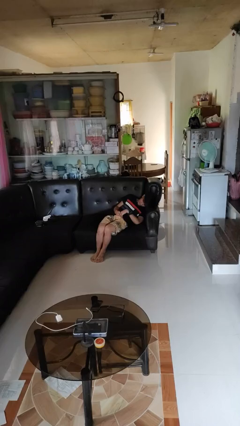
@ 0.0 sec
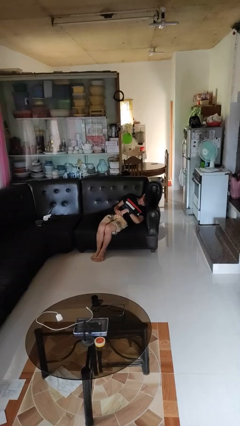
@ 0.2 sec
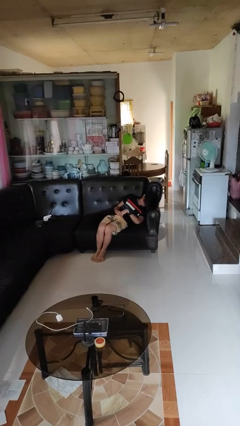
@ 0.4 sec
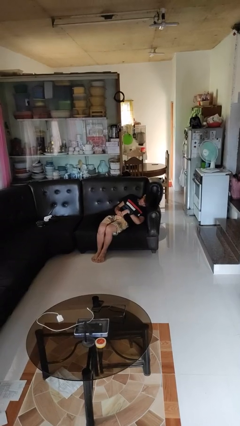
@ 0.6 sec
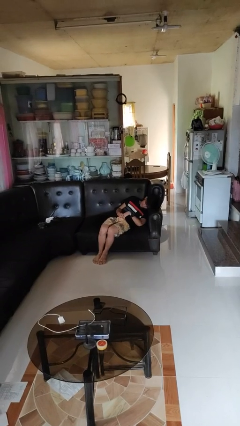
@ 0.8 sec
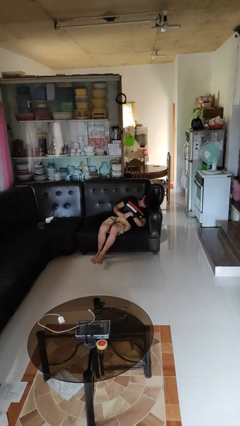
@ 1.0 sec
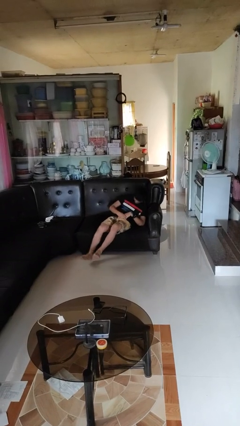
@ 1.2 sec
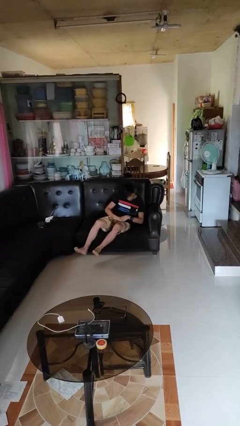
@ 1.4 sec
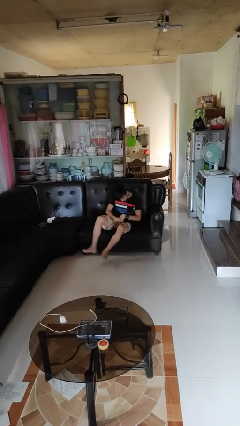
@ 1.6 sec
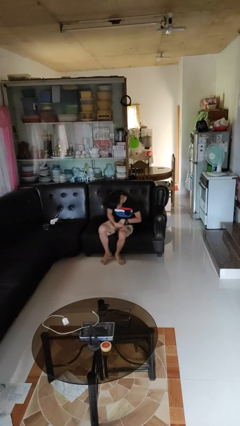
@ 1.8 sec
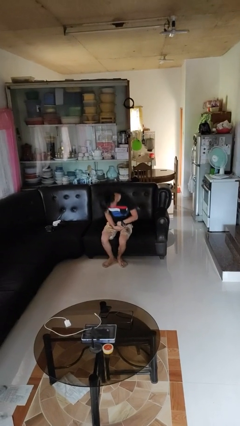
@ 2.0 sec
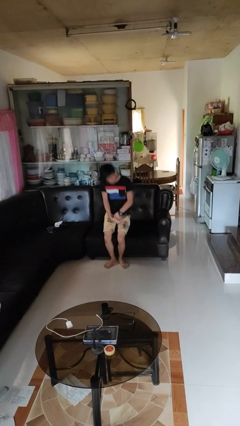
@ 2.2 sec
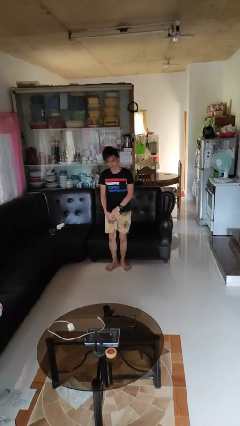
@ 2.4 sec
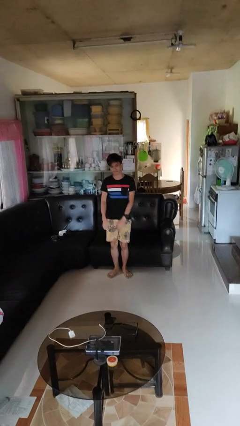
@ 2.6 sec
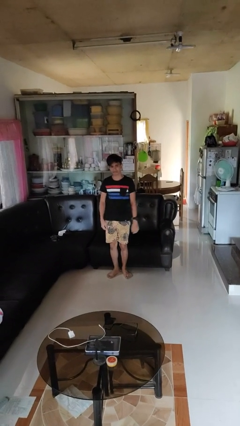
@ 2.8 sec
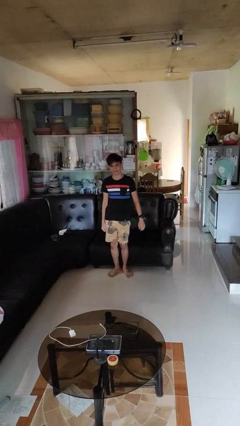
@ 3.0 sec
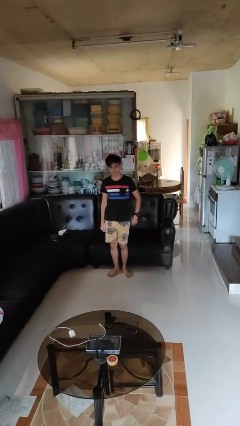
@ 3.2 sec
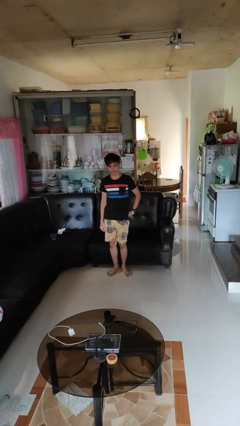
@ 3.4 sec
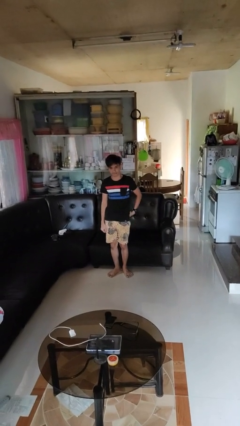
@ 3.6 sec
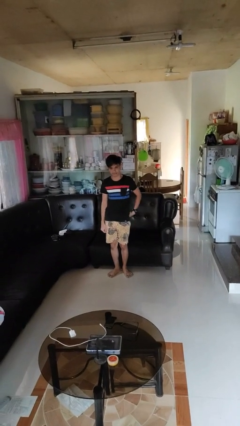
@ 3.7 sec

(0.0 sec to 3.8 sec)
person stands up

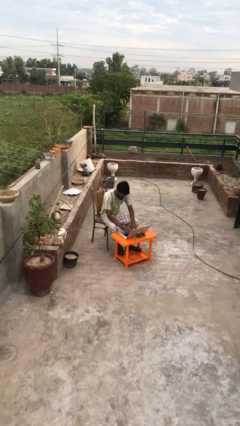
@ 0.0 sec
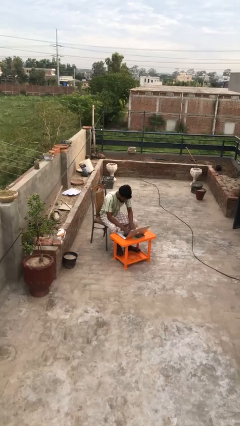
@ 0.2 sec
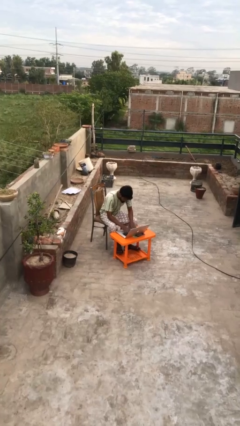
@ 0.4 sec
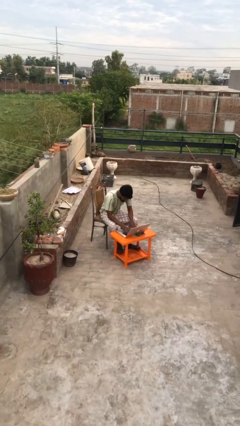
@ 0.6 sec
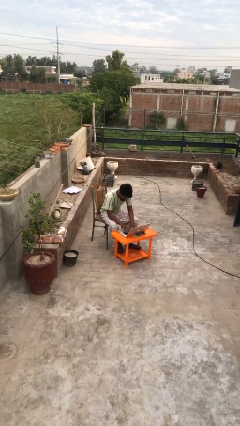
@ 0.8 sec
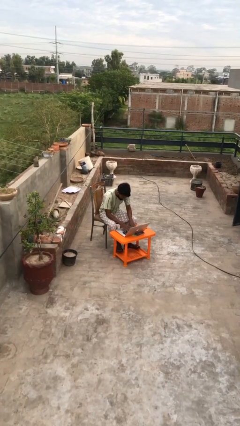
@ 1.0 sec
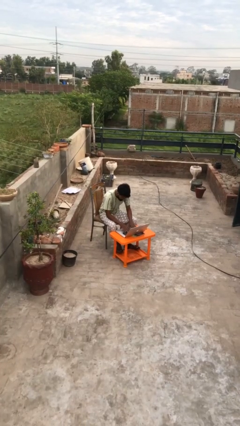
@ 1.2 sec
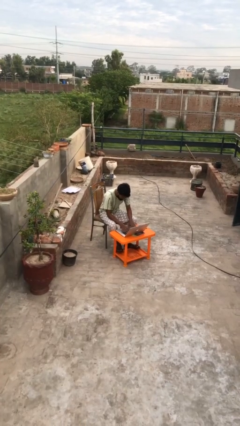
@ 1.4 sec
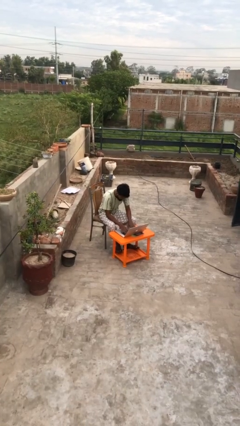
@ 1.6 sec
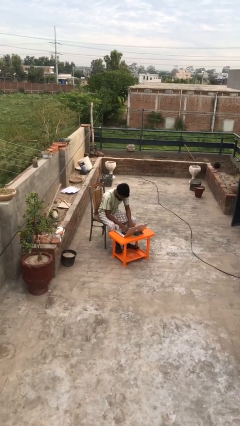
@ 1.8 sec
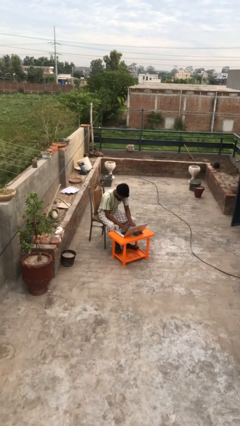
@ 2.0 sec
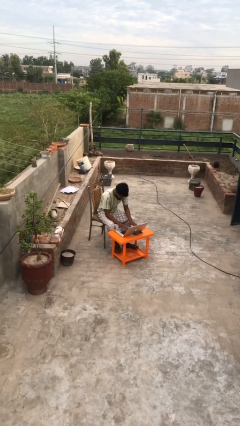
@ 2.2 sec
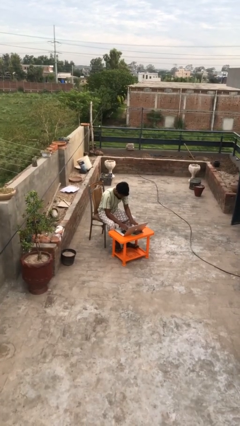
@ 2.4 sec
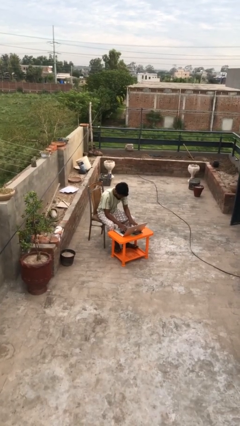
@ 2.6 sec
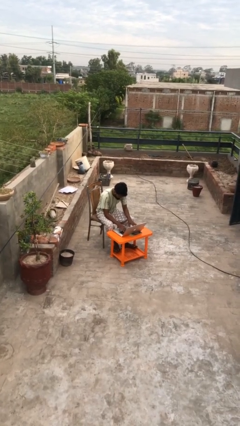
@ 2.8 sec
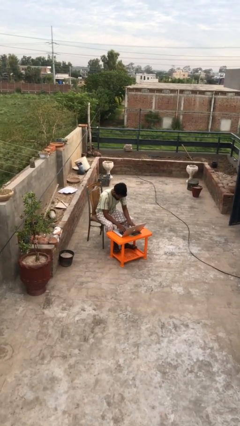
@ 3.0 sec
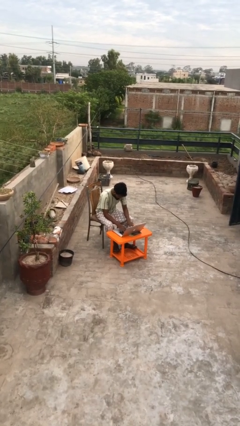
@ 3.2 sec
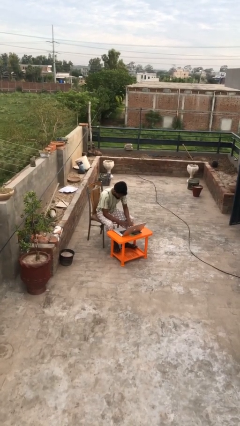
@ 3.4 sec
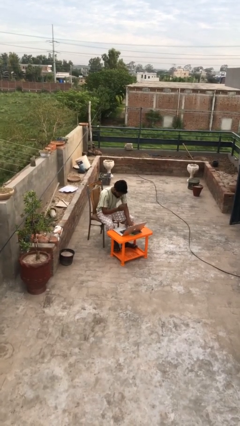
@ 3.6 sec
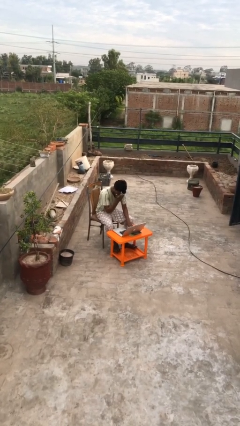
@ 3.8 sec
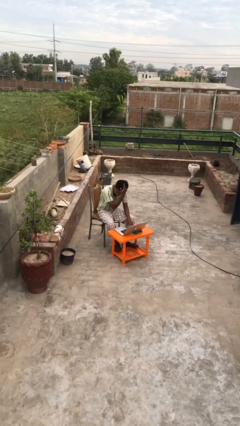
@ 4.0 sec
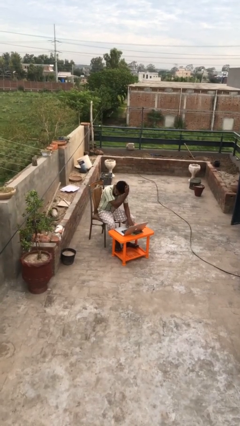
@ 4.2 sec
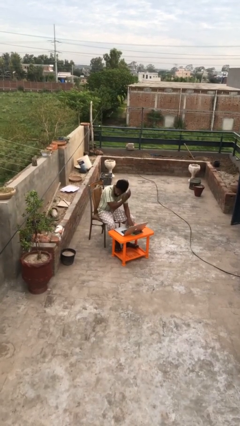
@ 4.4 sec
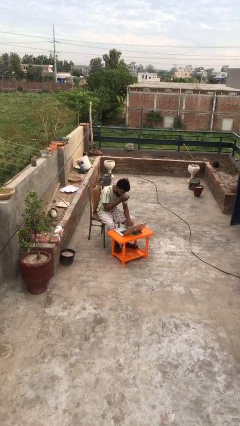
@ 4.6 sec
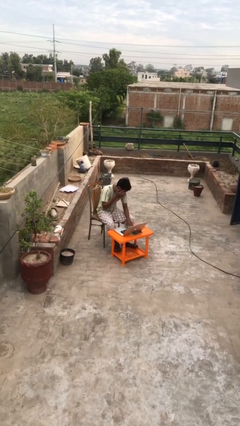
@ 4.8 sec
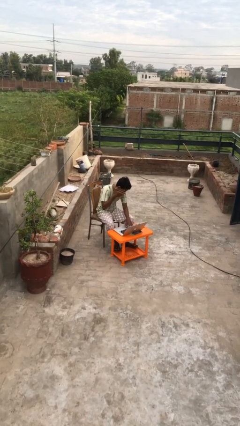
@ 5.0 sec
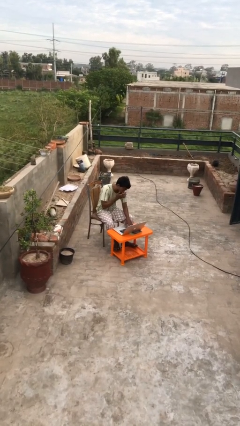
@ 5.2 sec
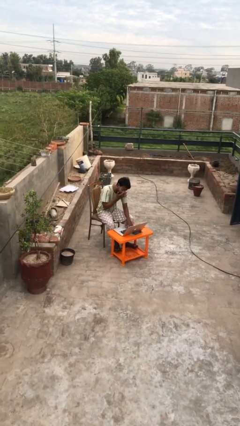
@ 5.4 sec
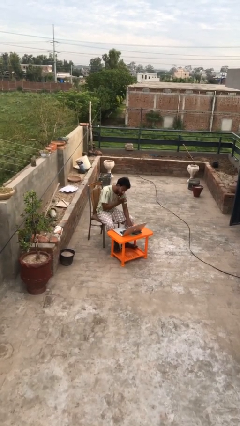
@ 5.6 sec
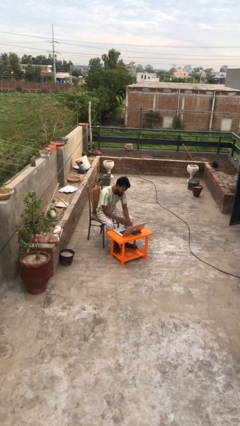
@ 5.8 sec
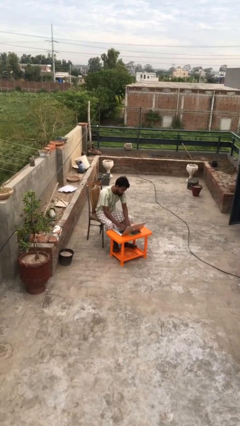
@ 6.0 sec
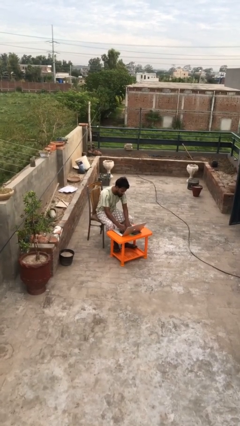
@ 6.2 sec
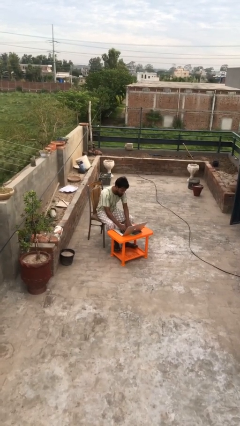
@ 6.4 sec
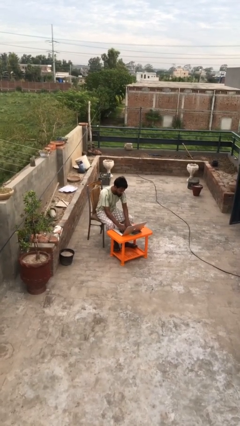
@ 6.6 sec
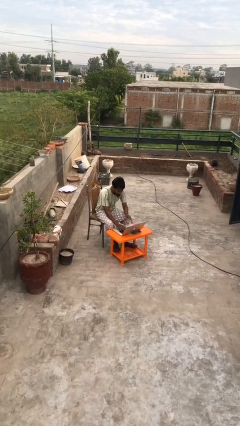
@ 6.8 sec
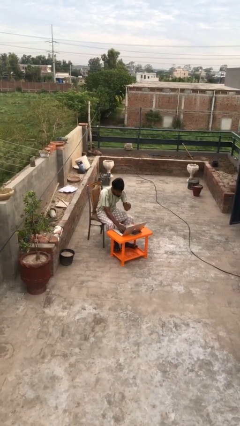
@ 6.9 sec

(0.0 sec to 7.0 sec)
person interacts with laptop

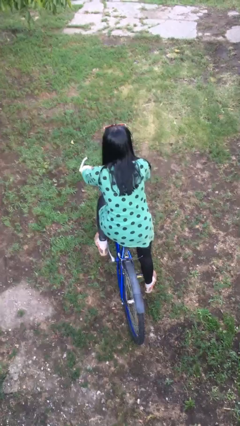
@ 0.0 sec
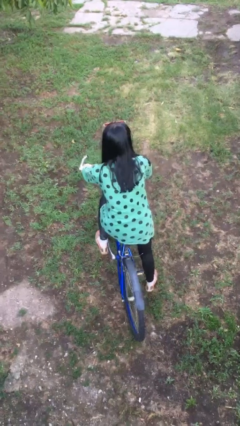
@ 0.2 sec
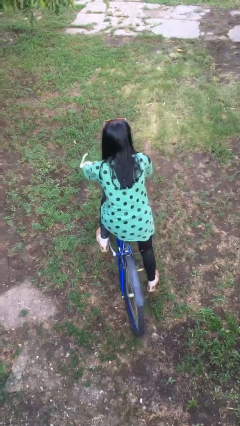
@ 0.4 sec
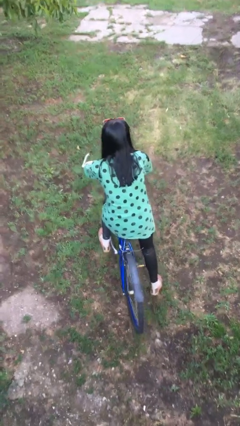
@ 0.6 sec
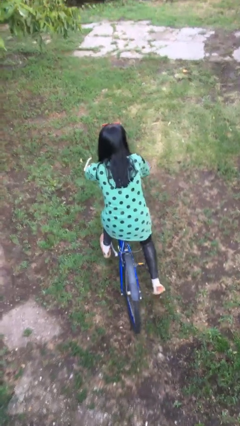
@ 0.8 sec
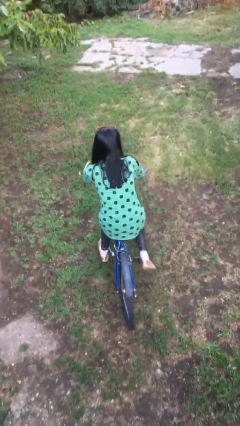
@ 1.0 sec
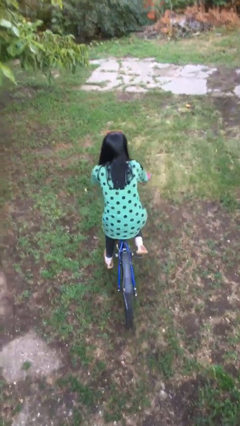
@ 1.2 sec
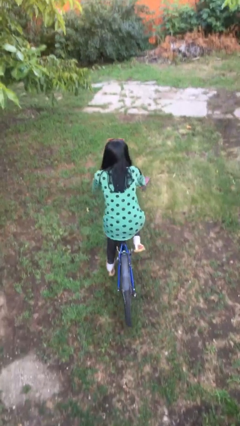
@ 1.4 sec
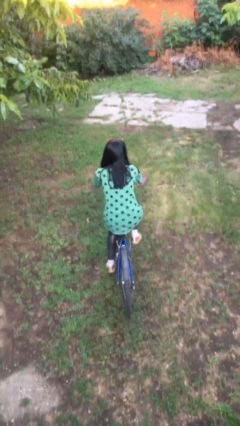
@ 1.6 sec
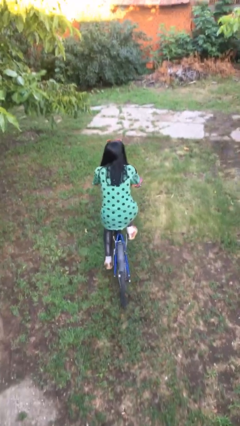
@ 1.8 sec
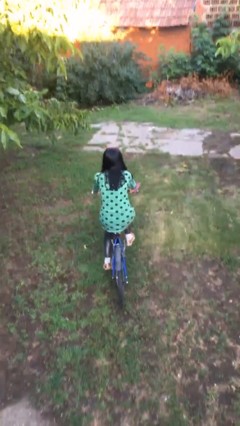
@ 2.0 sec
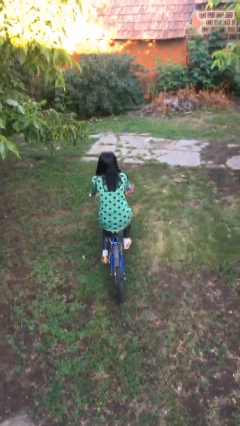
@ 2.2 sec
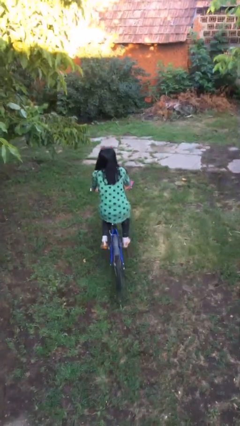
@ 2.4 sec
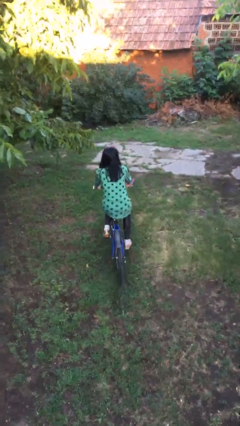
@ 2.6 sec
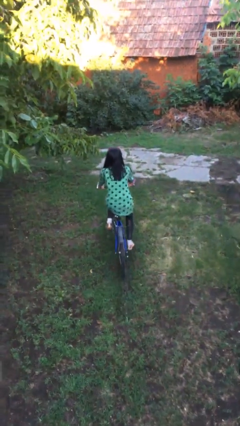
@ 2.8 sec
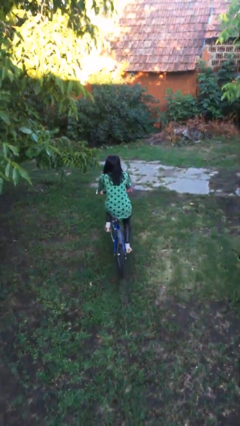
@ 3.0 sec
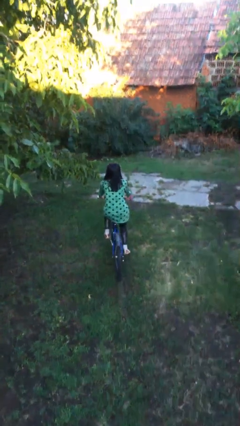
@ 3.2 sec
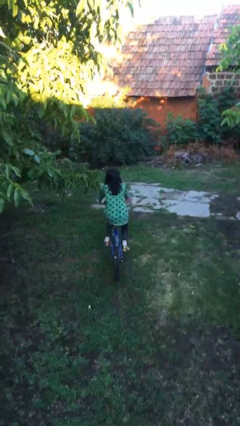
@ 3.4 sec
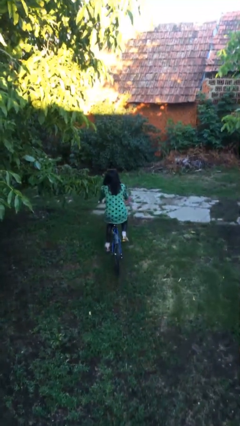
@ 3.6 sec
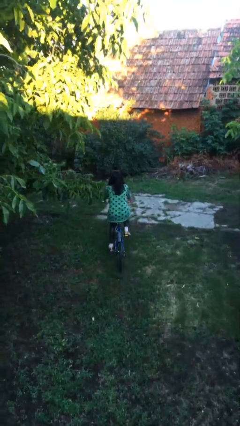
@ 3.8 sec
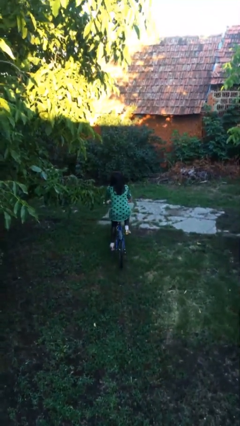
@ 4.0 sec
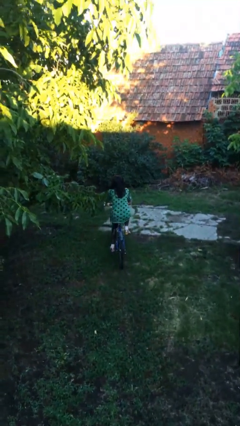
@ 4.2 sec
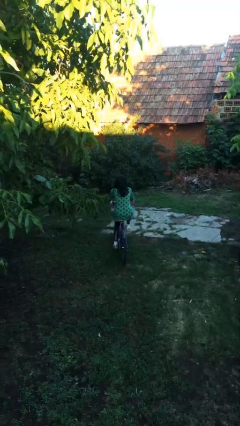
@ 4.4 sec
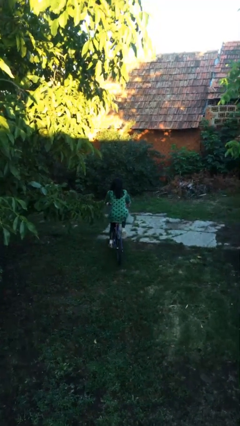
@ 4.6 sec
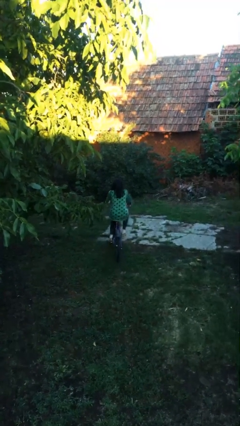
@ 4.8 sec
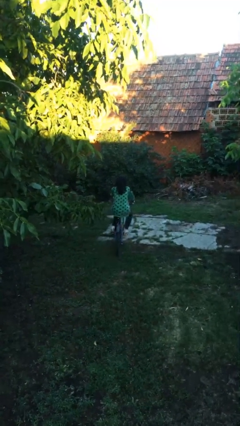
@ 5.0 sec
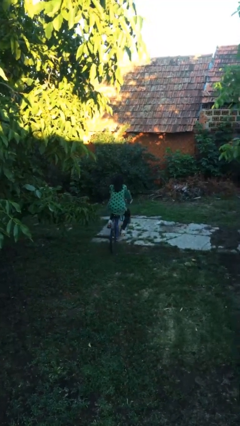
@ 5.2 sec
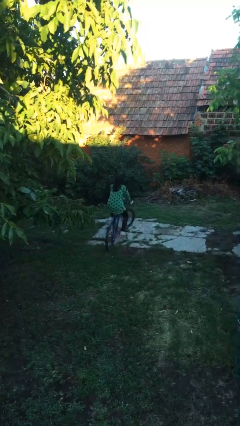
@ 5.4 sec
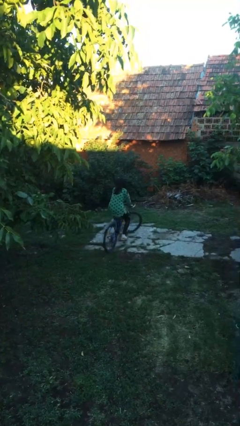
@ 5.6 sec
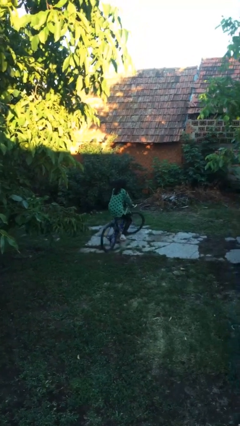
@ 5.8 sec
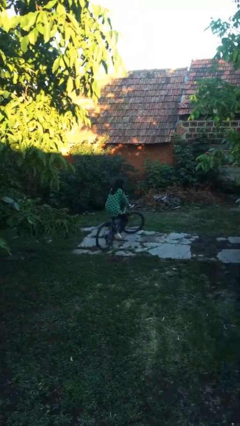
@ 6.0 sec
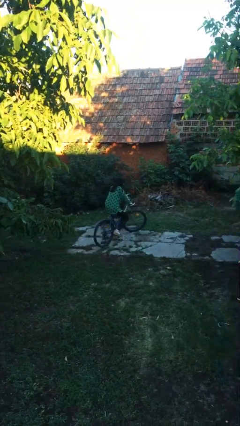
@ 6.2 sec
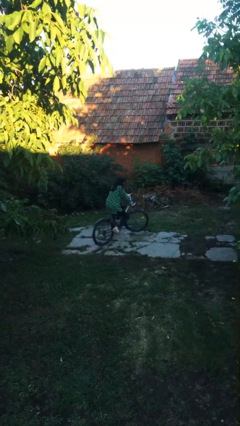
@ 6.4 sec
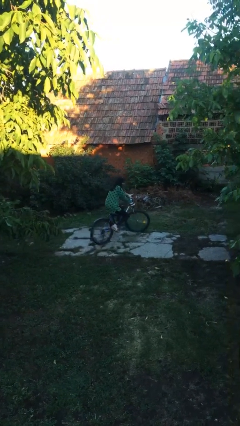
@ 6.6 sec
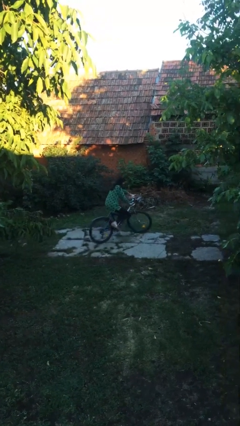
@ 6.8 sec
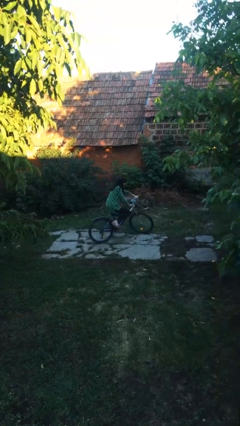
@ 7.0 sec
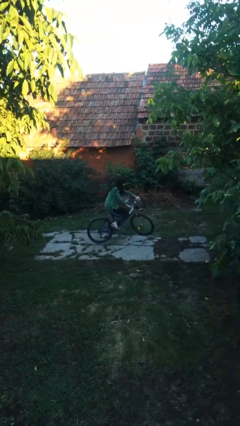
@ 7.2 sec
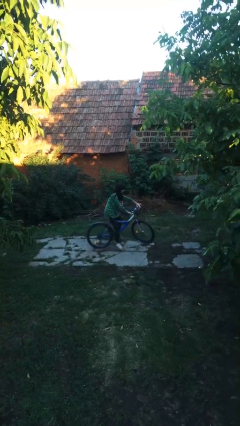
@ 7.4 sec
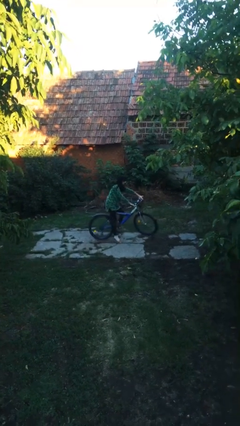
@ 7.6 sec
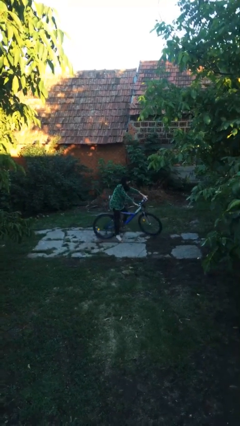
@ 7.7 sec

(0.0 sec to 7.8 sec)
person rides bicycle
